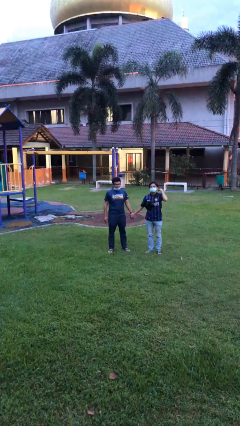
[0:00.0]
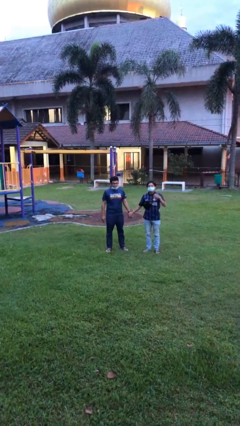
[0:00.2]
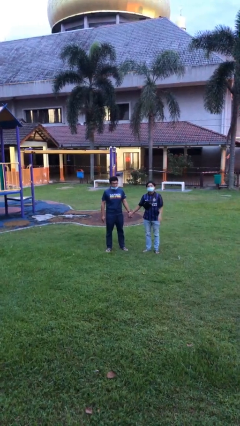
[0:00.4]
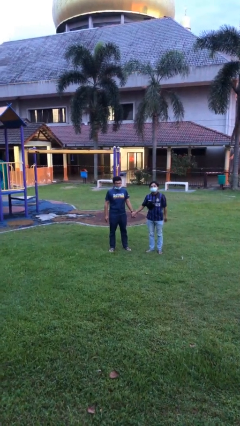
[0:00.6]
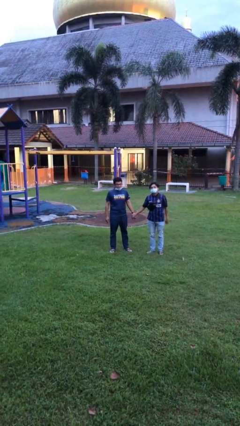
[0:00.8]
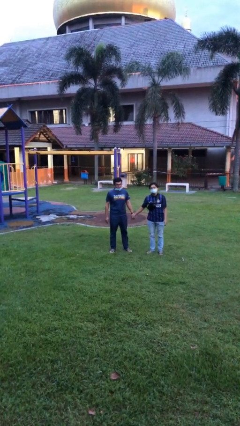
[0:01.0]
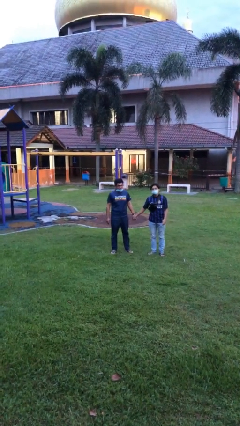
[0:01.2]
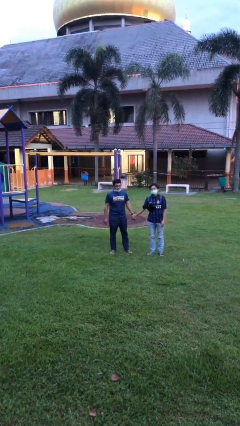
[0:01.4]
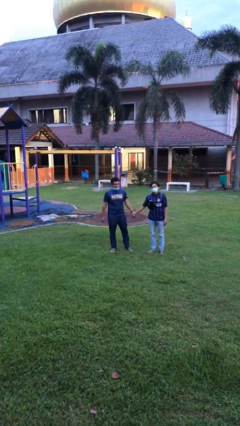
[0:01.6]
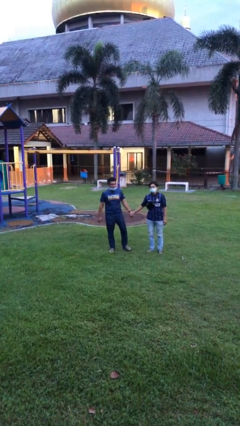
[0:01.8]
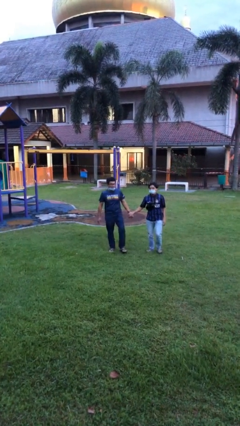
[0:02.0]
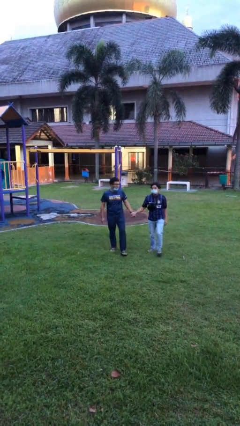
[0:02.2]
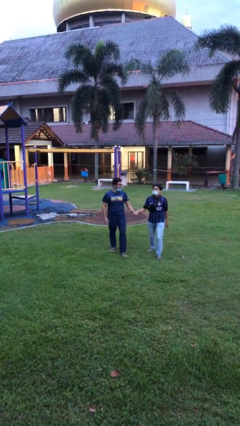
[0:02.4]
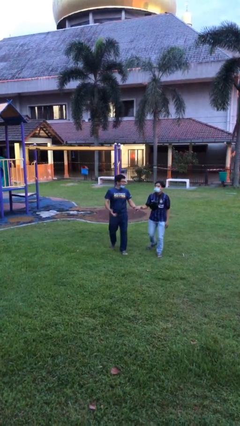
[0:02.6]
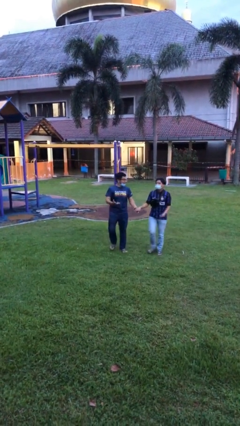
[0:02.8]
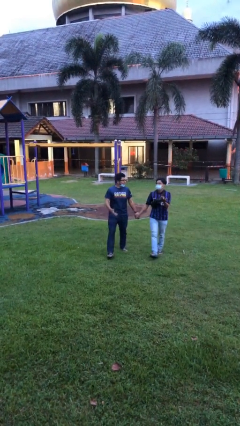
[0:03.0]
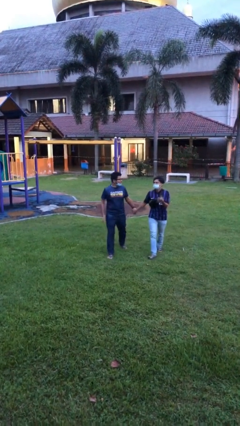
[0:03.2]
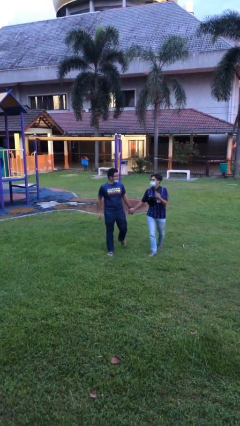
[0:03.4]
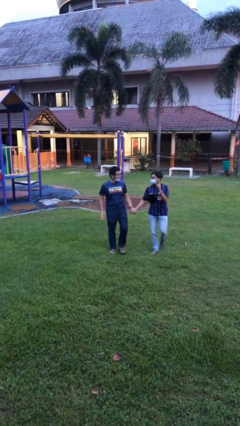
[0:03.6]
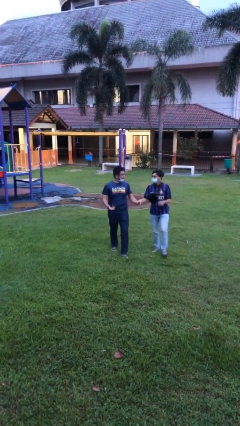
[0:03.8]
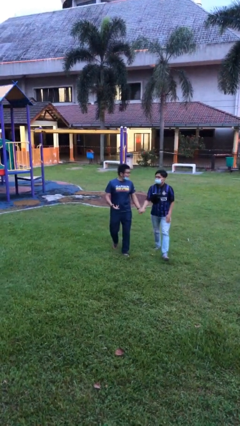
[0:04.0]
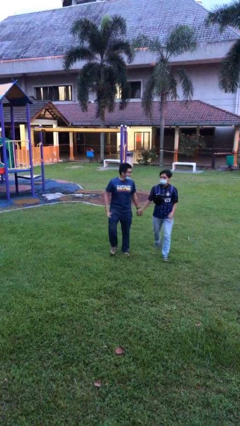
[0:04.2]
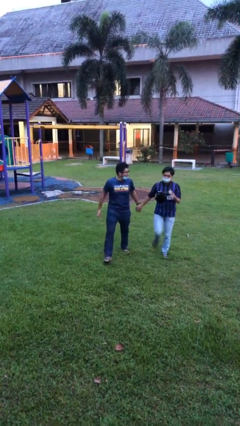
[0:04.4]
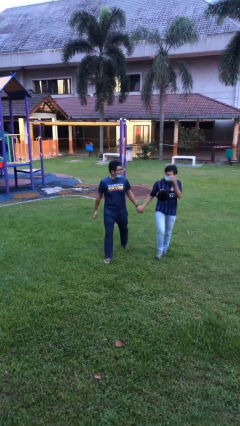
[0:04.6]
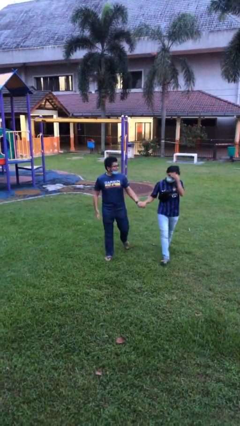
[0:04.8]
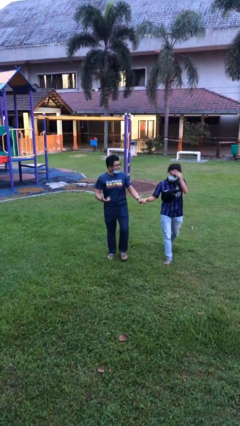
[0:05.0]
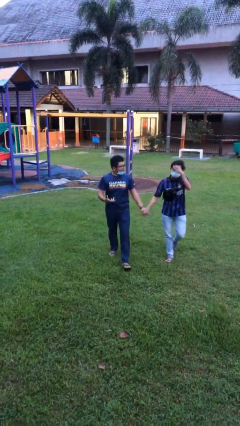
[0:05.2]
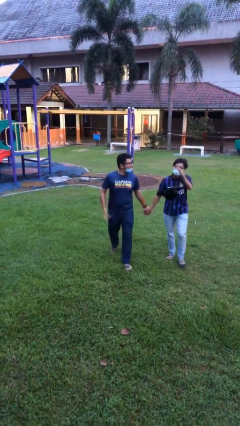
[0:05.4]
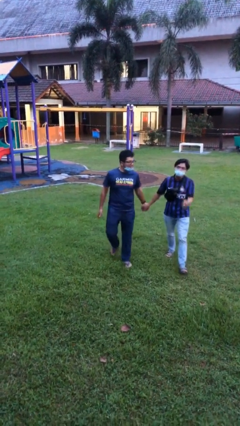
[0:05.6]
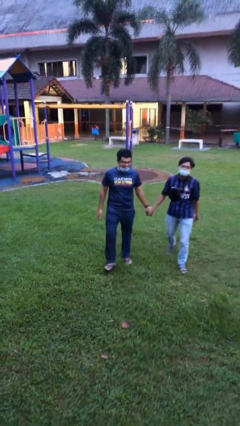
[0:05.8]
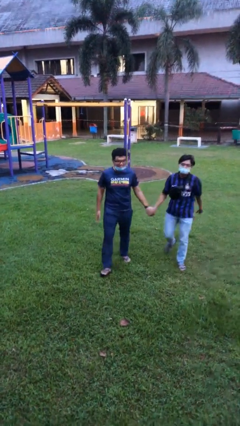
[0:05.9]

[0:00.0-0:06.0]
person holds hand

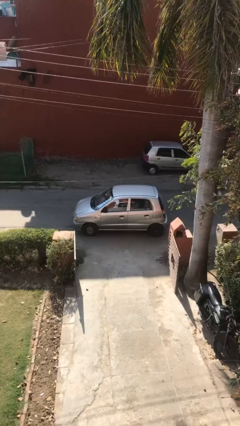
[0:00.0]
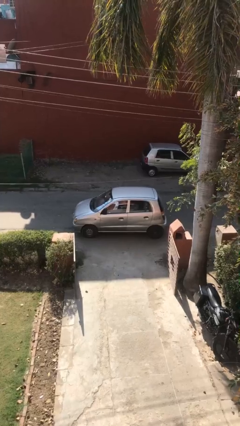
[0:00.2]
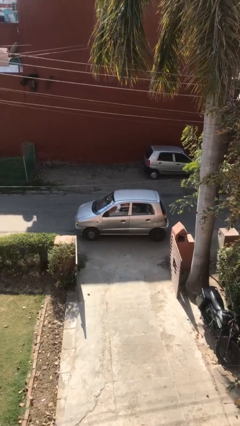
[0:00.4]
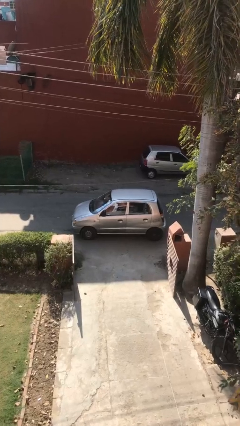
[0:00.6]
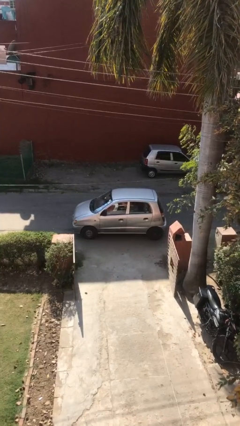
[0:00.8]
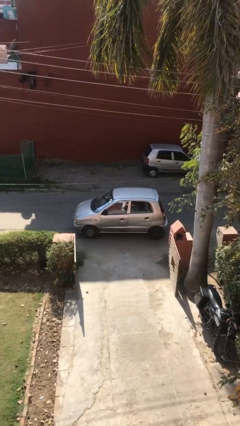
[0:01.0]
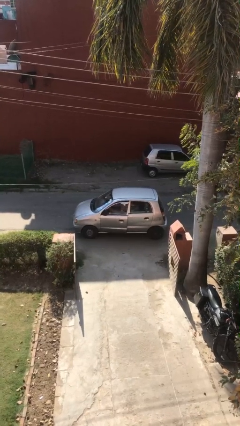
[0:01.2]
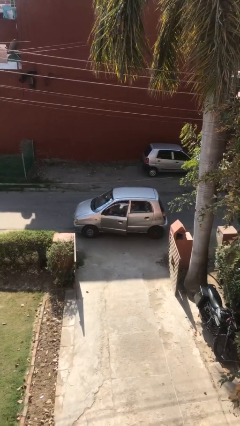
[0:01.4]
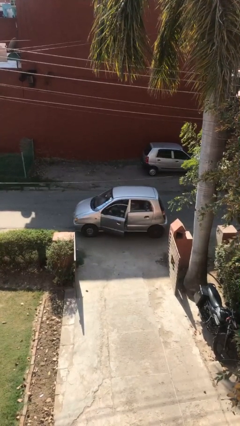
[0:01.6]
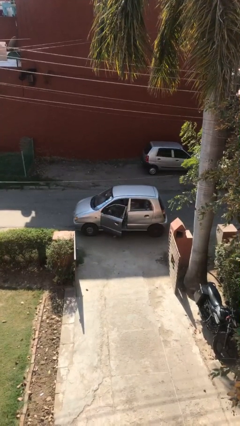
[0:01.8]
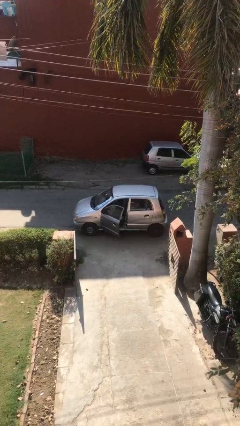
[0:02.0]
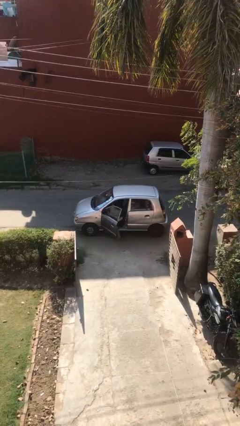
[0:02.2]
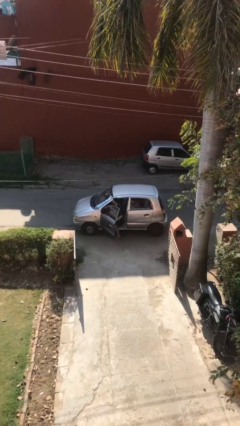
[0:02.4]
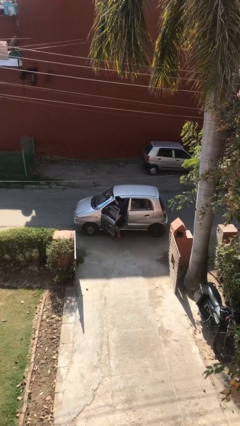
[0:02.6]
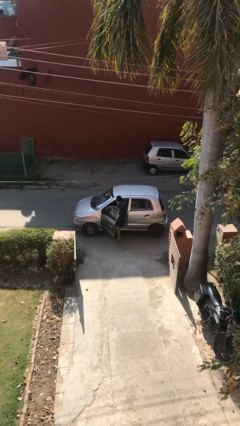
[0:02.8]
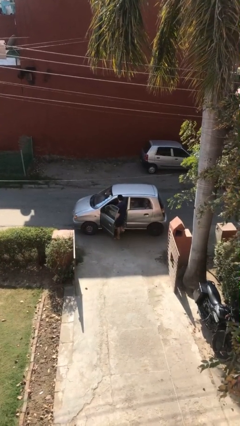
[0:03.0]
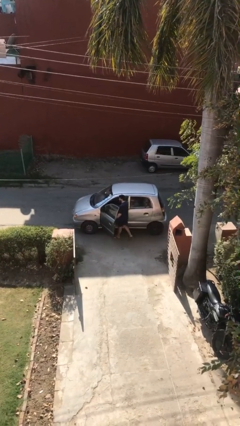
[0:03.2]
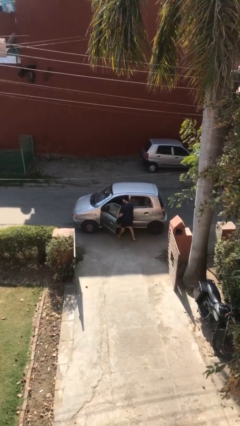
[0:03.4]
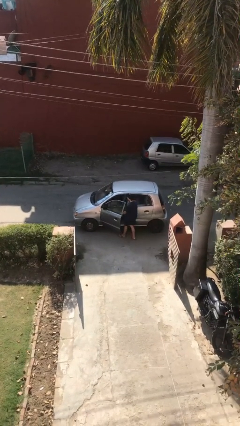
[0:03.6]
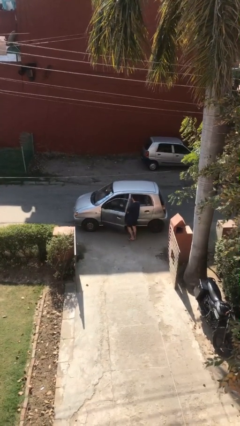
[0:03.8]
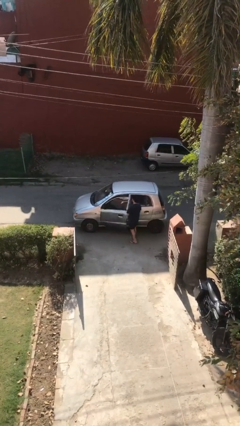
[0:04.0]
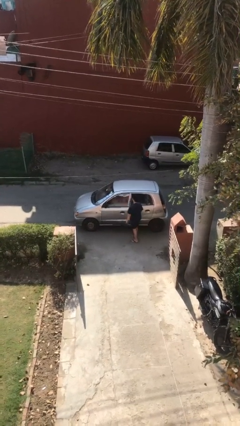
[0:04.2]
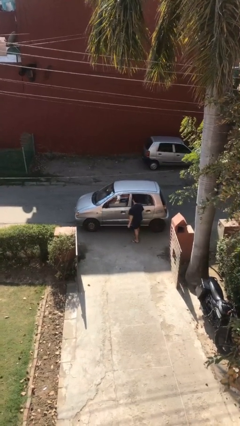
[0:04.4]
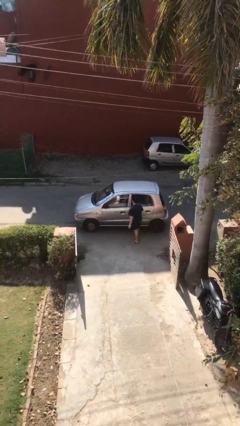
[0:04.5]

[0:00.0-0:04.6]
car drops off person

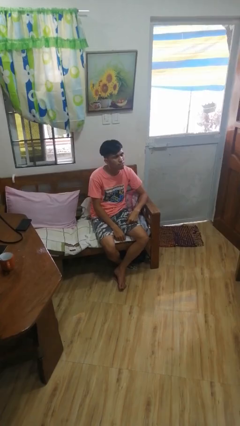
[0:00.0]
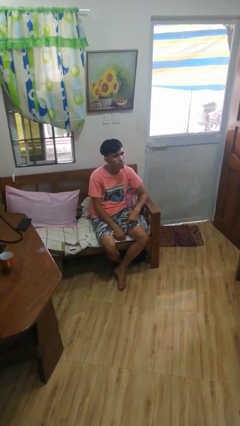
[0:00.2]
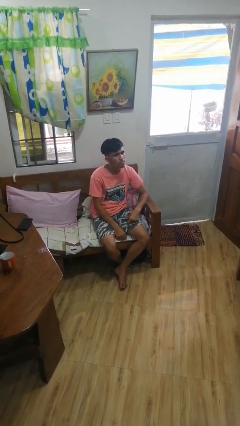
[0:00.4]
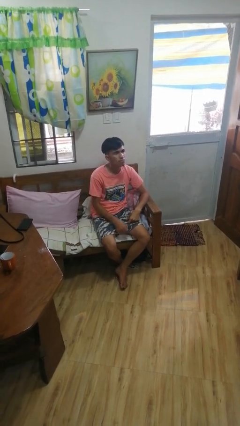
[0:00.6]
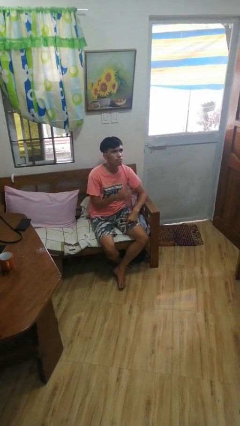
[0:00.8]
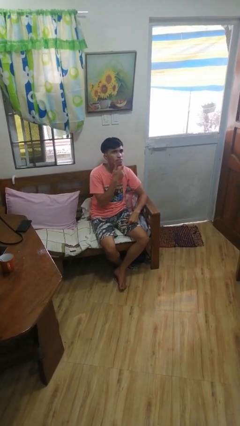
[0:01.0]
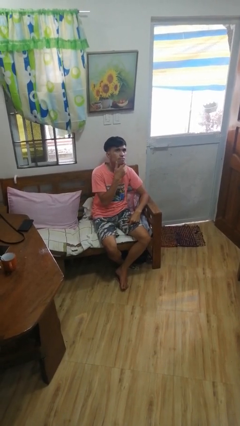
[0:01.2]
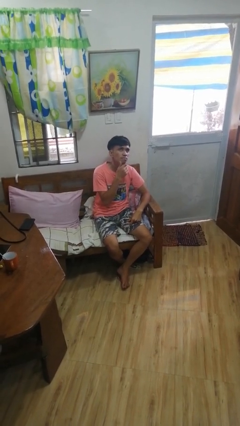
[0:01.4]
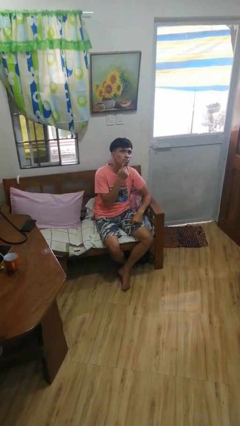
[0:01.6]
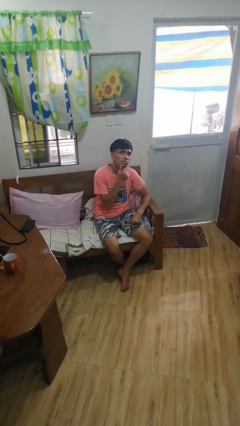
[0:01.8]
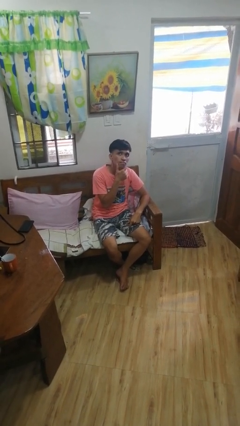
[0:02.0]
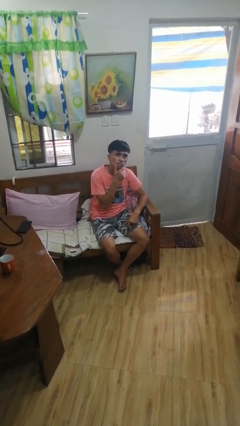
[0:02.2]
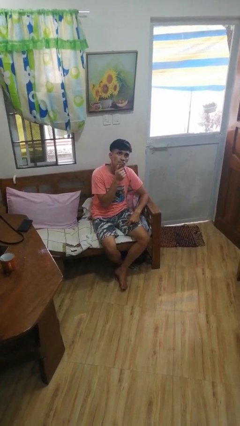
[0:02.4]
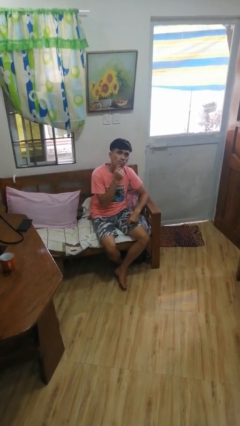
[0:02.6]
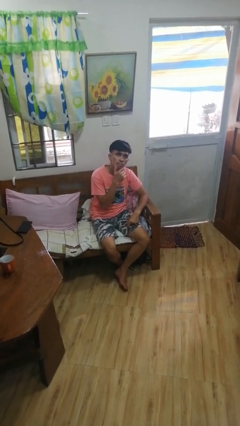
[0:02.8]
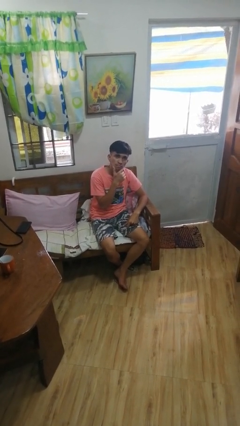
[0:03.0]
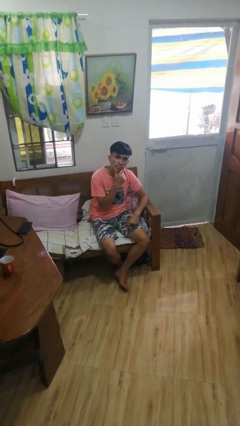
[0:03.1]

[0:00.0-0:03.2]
person strokes chin

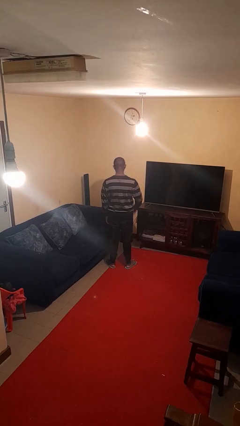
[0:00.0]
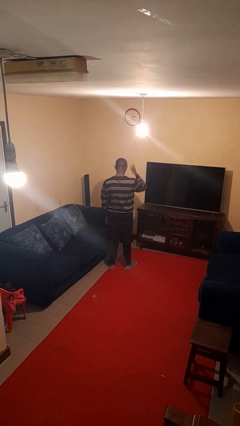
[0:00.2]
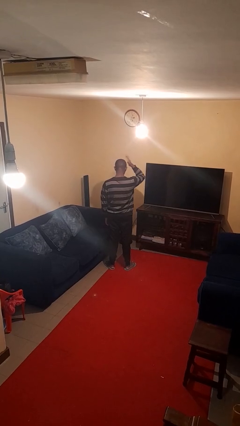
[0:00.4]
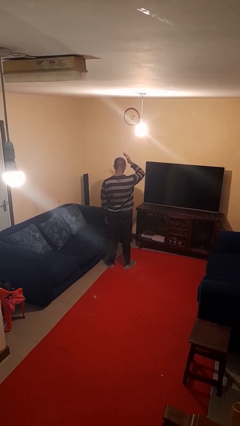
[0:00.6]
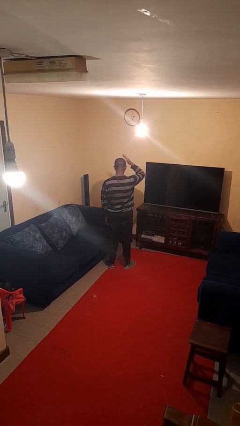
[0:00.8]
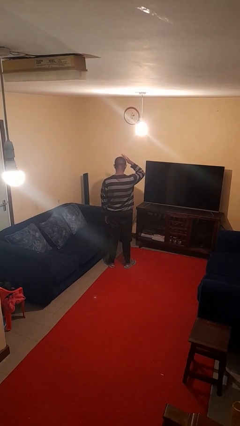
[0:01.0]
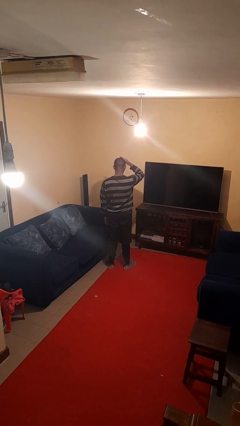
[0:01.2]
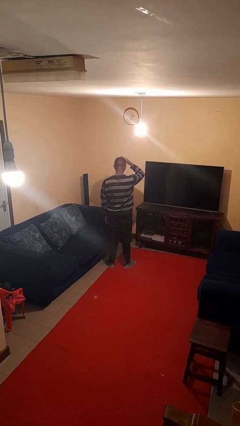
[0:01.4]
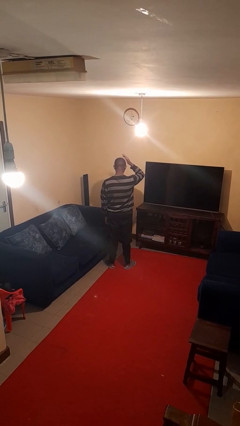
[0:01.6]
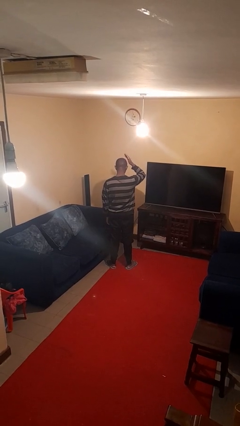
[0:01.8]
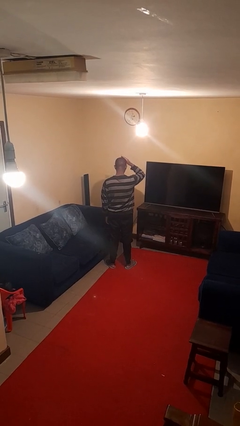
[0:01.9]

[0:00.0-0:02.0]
person pats head

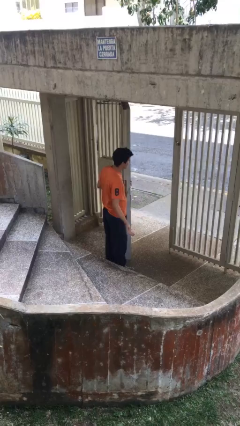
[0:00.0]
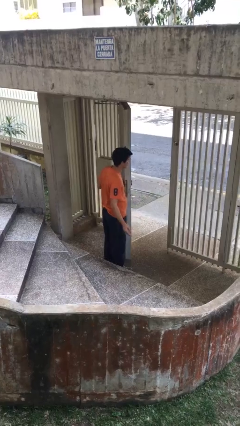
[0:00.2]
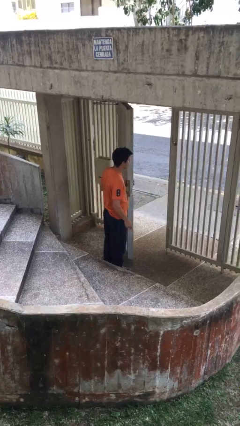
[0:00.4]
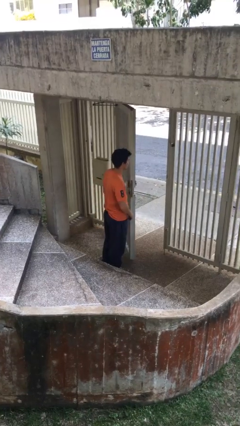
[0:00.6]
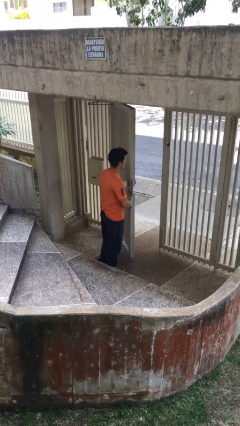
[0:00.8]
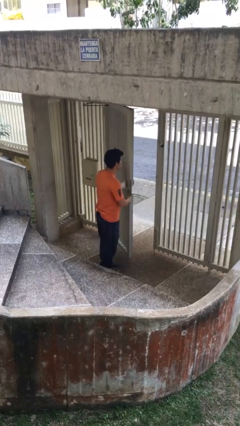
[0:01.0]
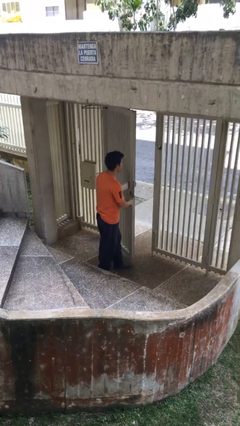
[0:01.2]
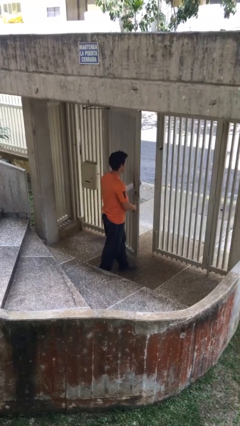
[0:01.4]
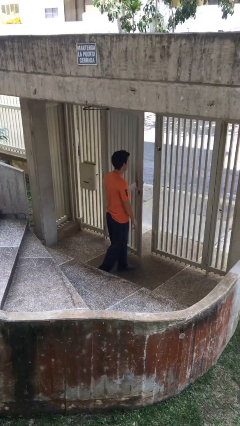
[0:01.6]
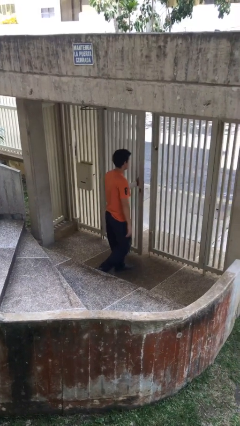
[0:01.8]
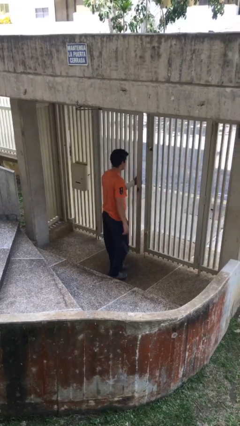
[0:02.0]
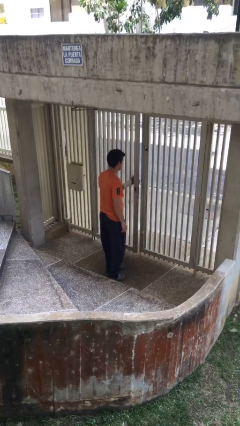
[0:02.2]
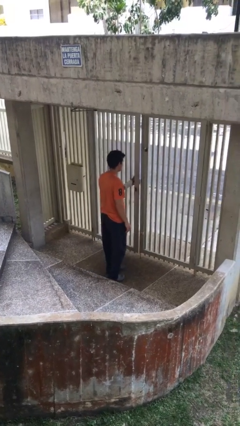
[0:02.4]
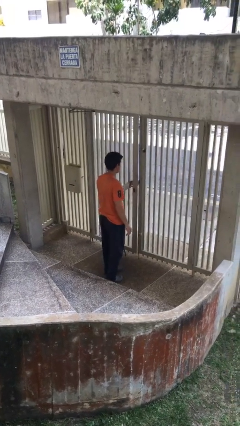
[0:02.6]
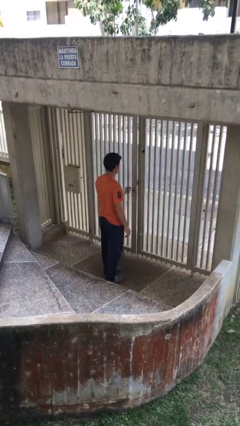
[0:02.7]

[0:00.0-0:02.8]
person closes facility door
